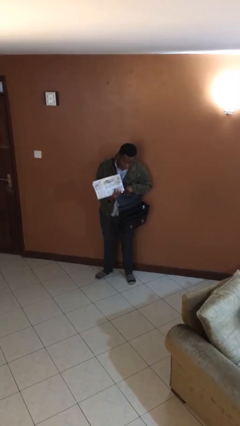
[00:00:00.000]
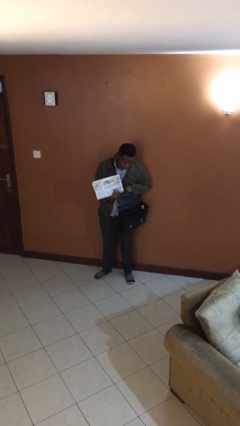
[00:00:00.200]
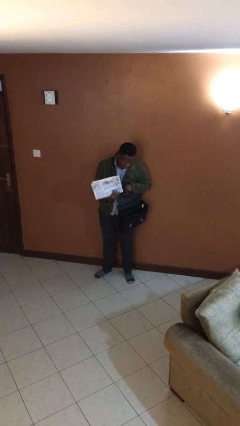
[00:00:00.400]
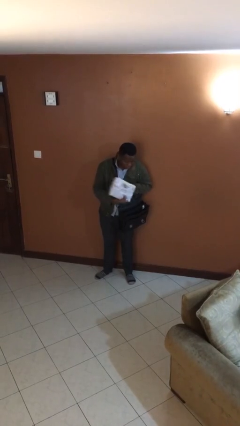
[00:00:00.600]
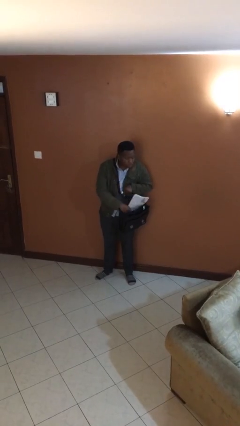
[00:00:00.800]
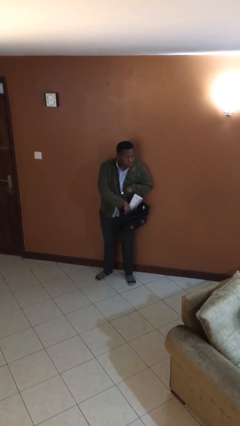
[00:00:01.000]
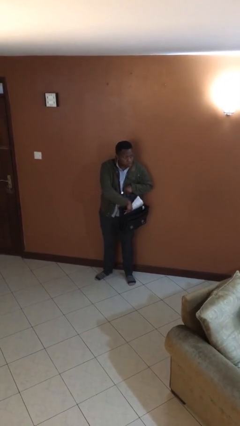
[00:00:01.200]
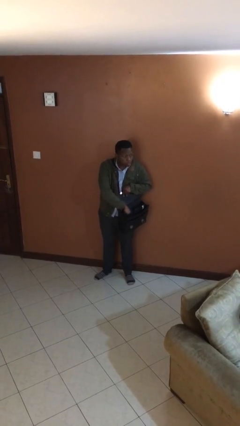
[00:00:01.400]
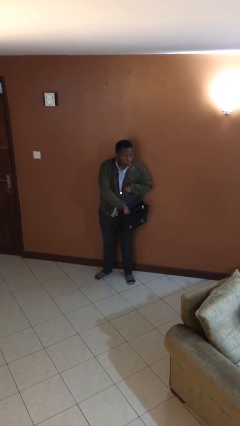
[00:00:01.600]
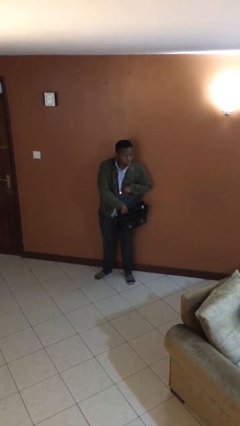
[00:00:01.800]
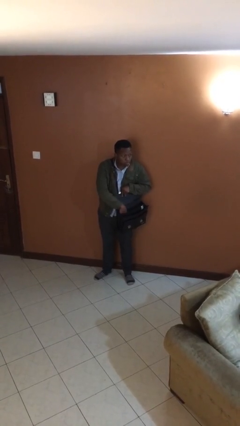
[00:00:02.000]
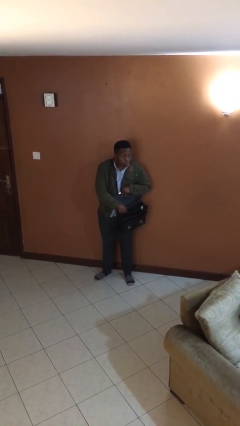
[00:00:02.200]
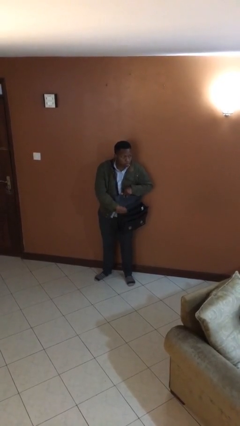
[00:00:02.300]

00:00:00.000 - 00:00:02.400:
person puts object into purse

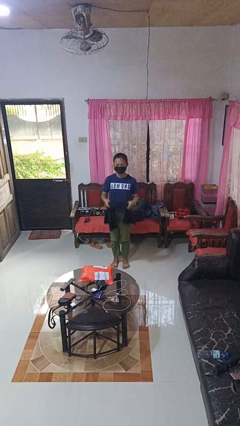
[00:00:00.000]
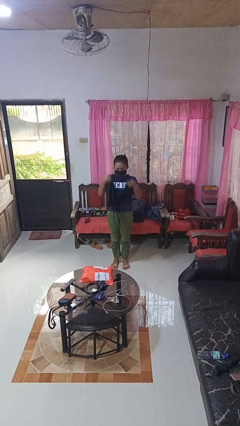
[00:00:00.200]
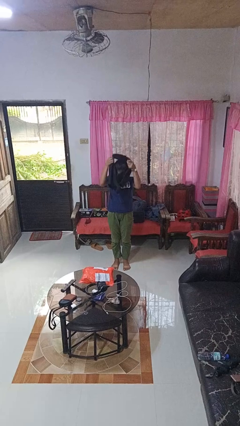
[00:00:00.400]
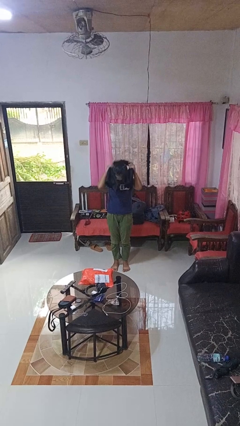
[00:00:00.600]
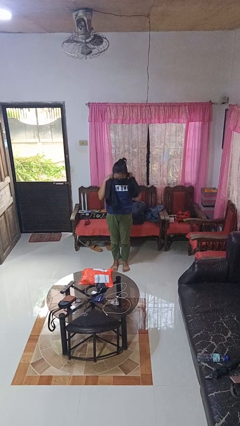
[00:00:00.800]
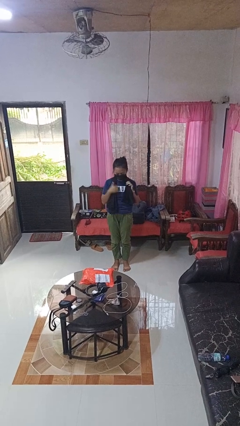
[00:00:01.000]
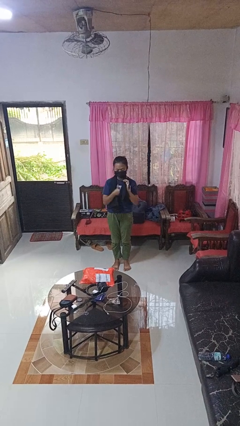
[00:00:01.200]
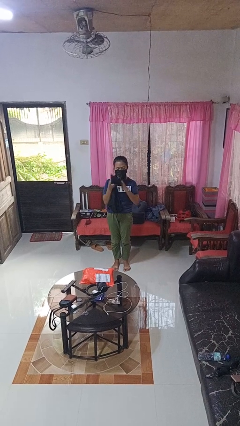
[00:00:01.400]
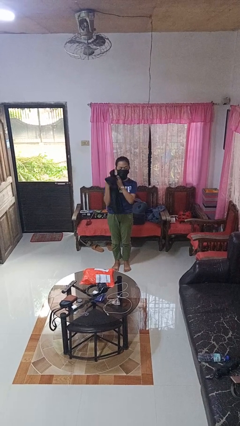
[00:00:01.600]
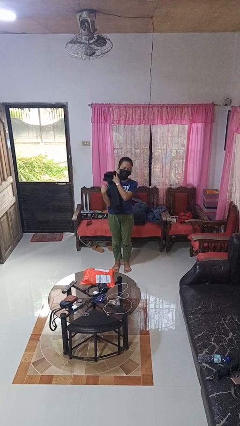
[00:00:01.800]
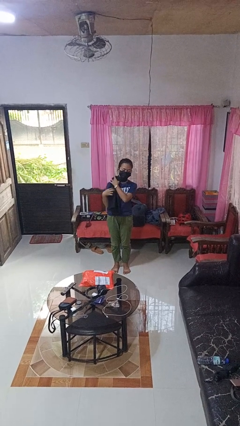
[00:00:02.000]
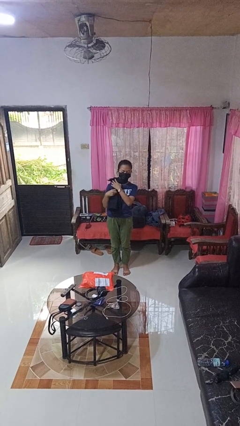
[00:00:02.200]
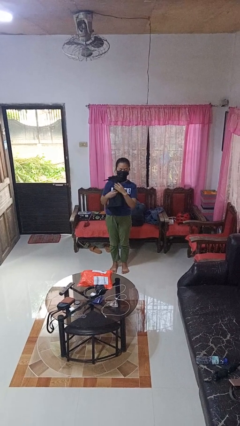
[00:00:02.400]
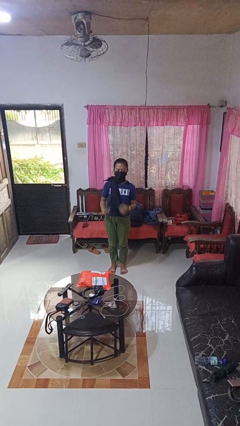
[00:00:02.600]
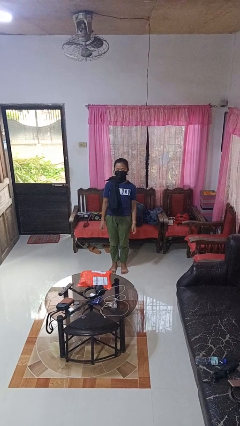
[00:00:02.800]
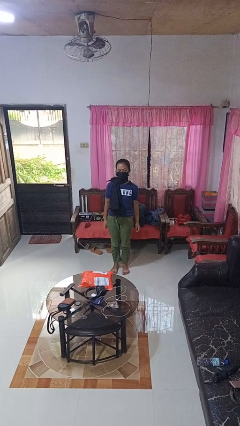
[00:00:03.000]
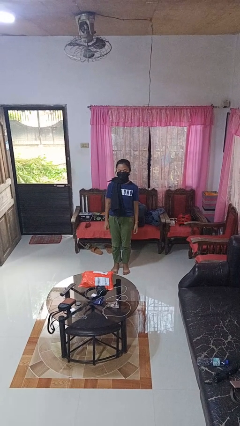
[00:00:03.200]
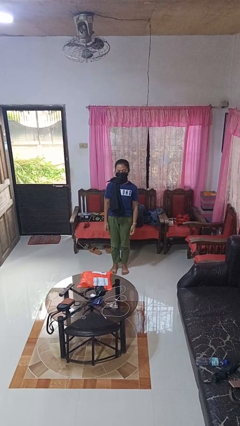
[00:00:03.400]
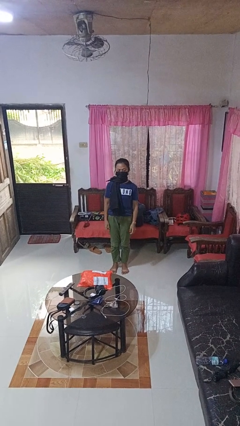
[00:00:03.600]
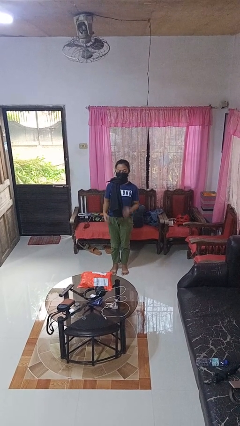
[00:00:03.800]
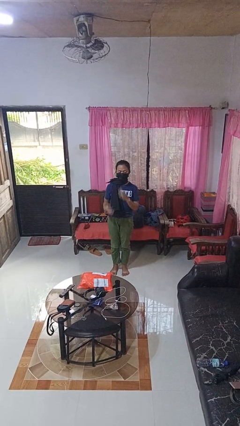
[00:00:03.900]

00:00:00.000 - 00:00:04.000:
person puts on scarf

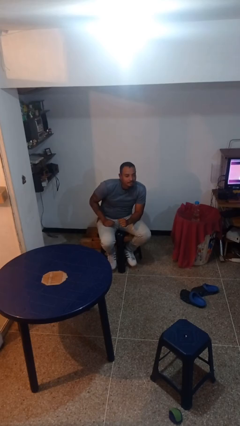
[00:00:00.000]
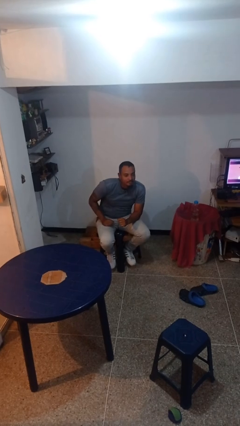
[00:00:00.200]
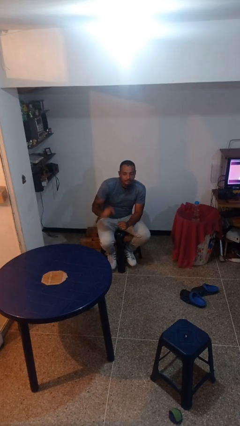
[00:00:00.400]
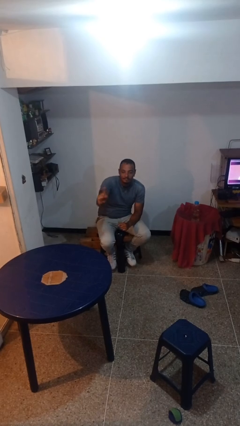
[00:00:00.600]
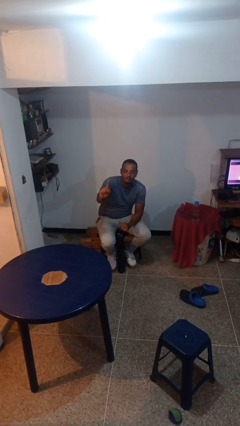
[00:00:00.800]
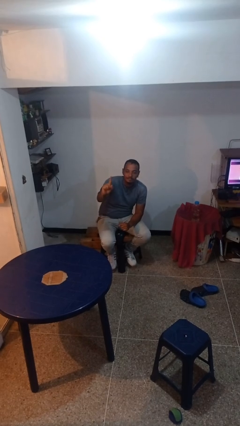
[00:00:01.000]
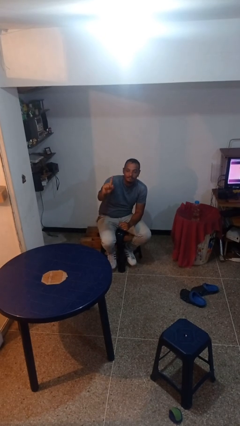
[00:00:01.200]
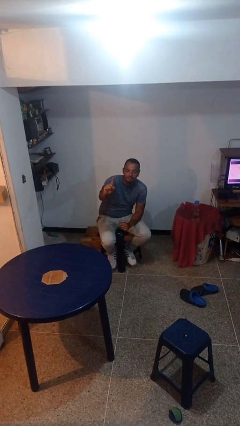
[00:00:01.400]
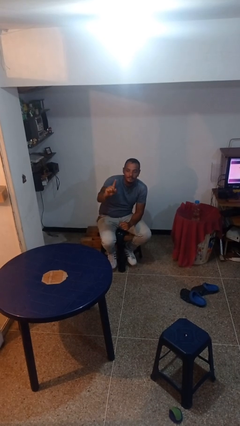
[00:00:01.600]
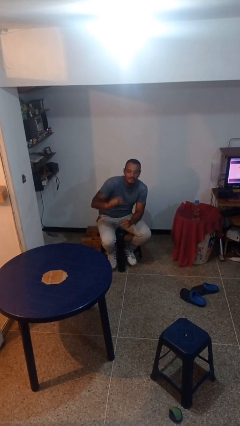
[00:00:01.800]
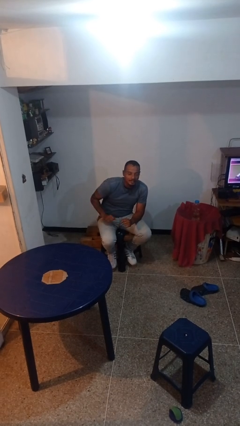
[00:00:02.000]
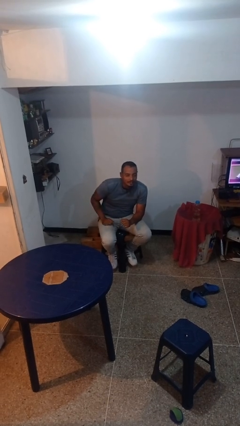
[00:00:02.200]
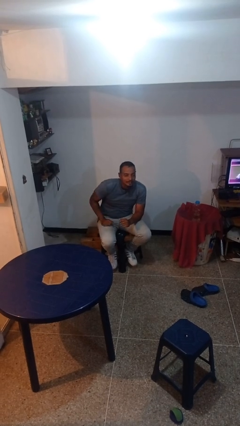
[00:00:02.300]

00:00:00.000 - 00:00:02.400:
person gestures number one

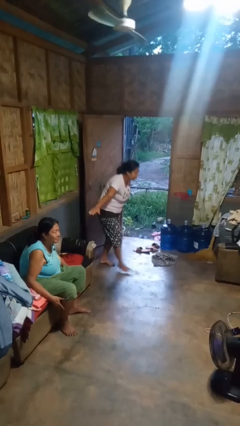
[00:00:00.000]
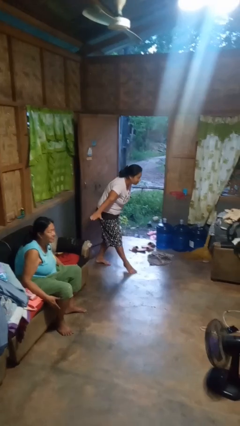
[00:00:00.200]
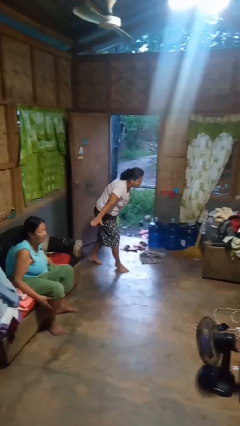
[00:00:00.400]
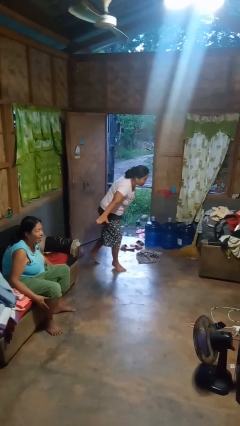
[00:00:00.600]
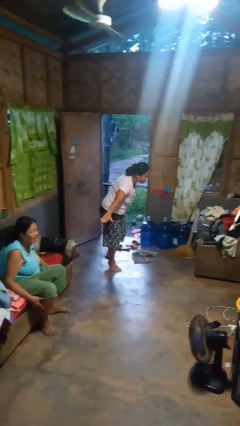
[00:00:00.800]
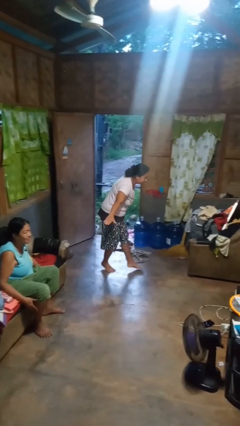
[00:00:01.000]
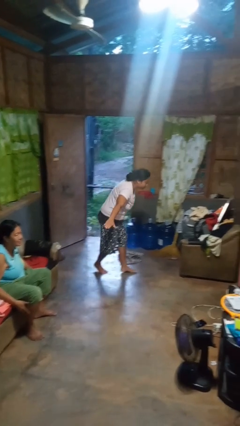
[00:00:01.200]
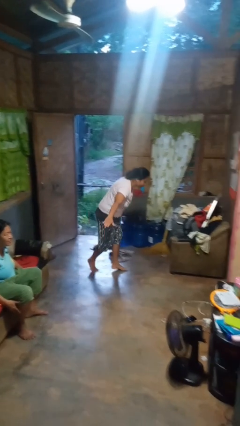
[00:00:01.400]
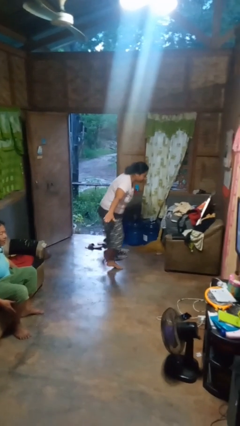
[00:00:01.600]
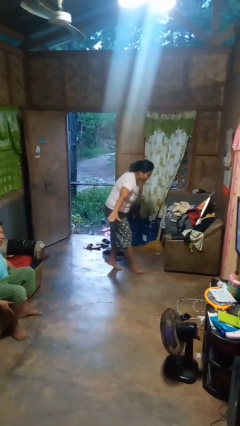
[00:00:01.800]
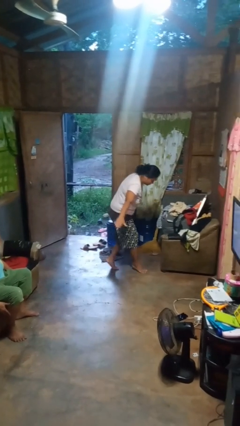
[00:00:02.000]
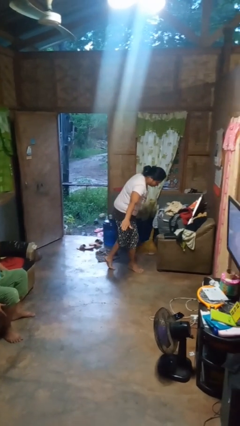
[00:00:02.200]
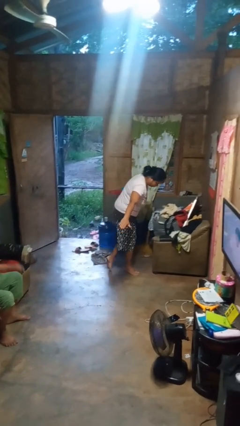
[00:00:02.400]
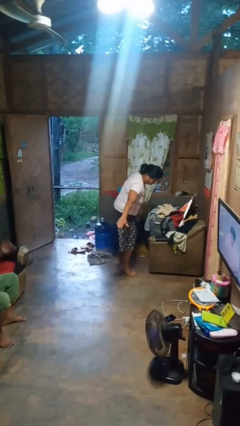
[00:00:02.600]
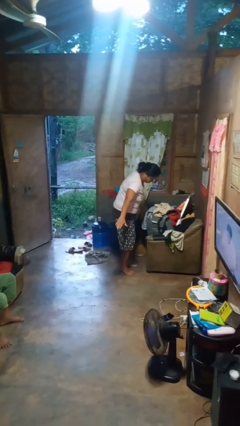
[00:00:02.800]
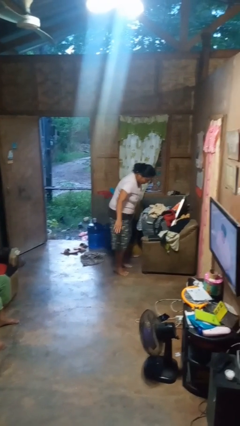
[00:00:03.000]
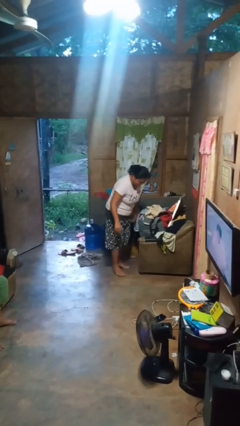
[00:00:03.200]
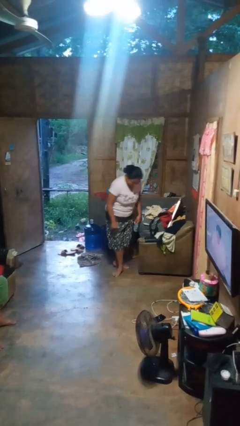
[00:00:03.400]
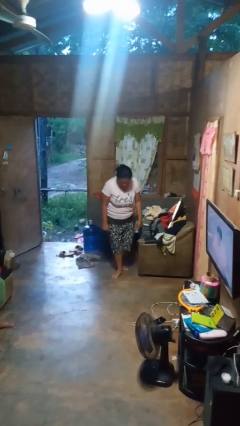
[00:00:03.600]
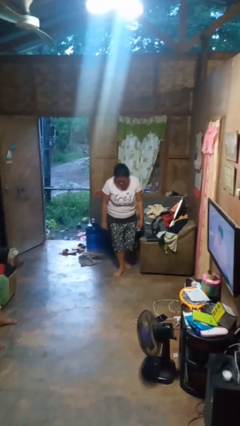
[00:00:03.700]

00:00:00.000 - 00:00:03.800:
person walks tiptoe

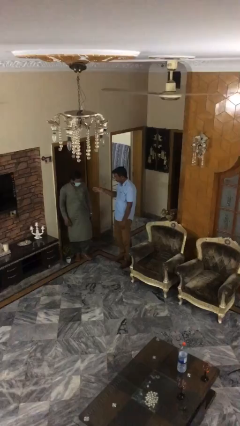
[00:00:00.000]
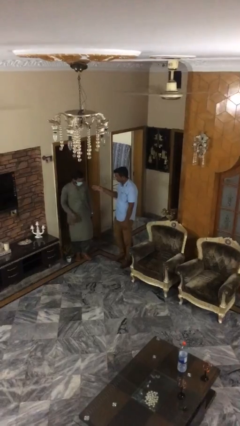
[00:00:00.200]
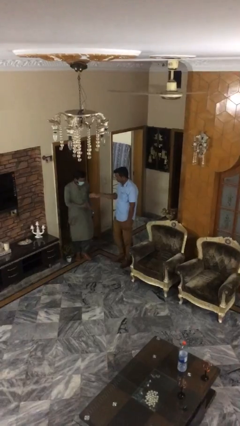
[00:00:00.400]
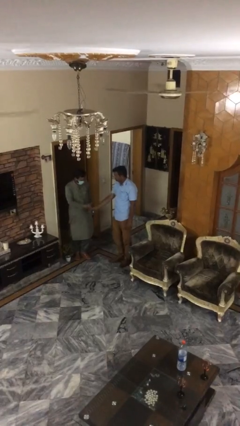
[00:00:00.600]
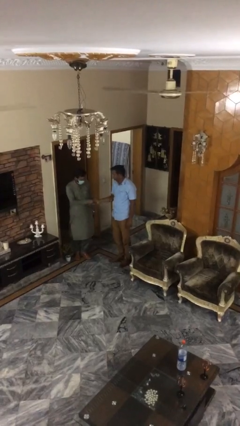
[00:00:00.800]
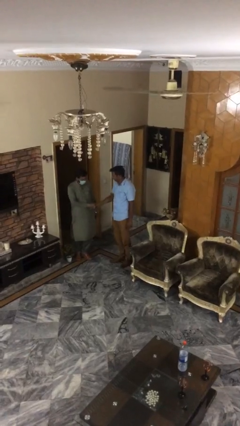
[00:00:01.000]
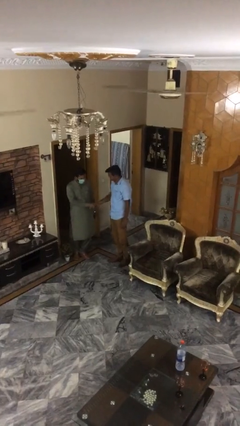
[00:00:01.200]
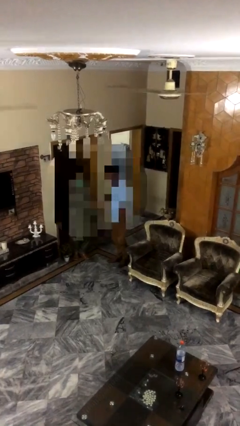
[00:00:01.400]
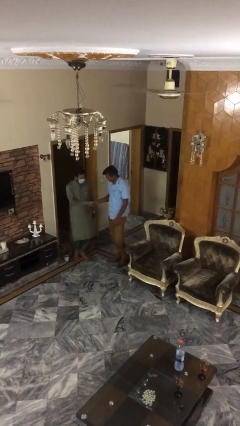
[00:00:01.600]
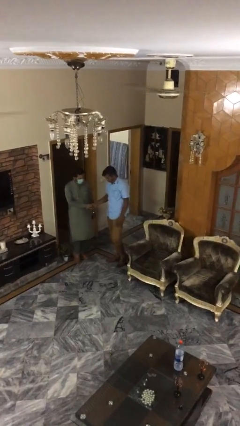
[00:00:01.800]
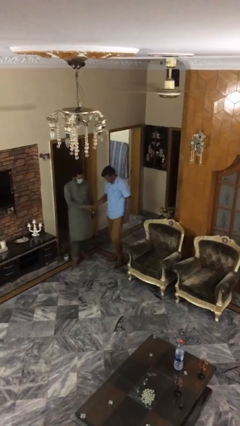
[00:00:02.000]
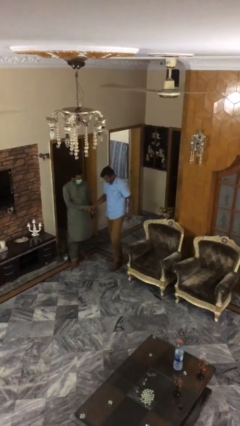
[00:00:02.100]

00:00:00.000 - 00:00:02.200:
person shakes hand

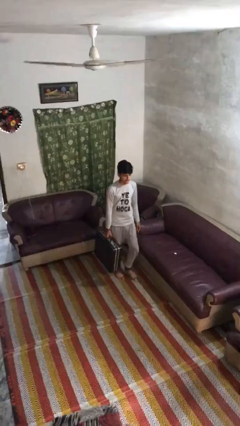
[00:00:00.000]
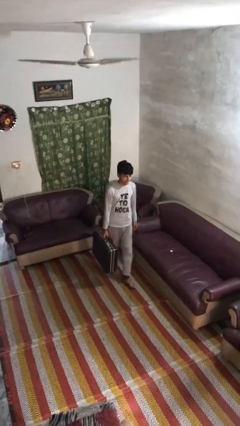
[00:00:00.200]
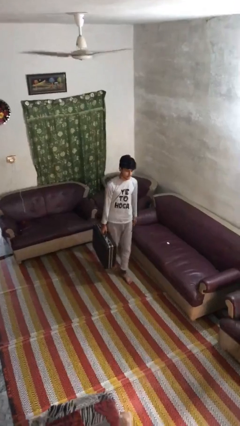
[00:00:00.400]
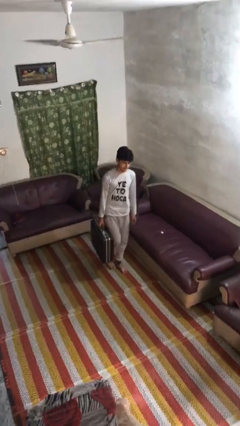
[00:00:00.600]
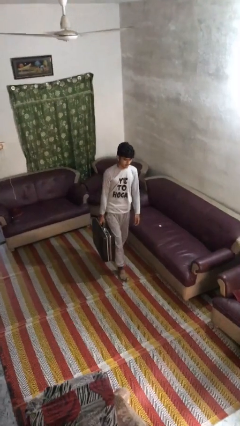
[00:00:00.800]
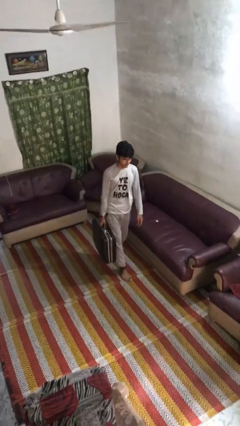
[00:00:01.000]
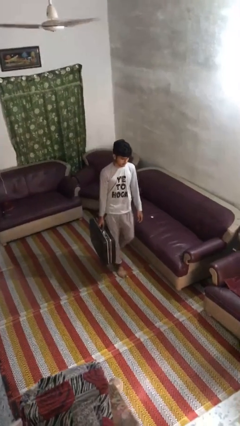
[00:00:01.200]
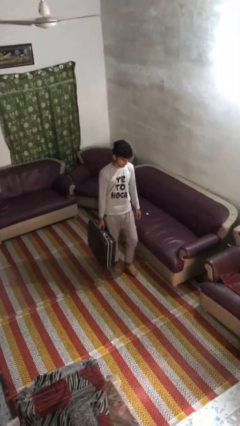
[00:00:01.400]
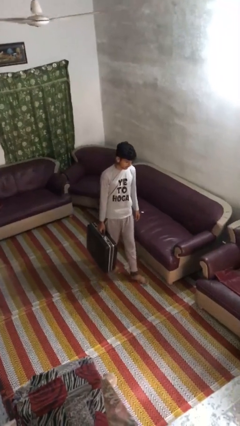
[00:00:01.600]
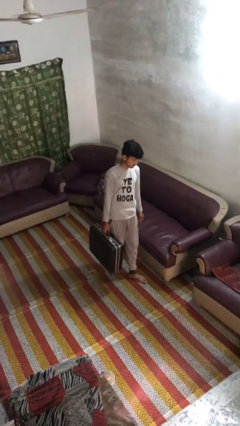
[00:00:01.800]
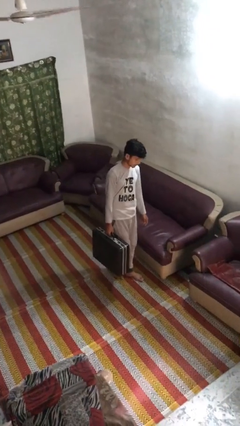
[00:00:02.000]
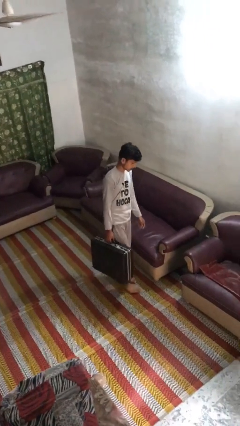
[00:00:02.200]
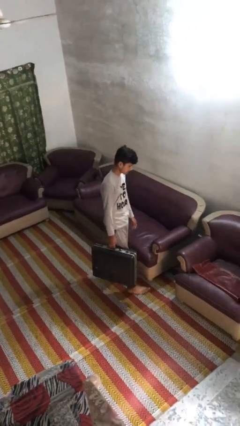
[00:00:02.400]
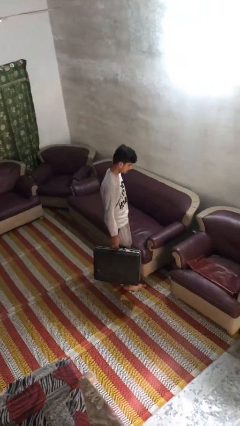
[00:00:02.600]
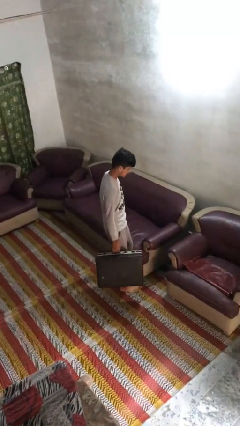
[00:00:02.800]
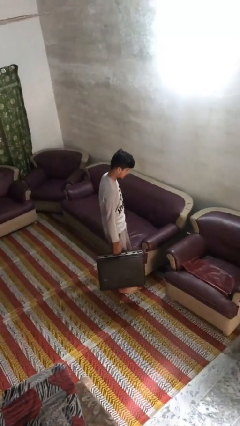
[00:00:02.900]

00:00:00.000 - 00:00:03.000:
person carries heavy object
